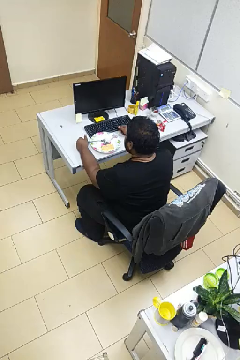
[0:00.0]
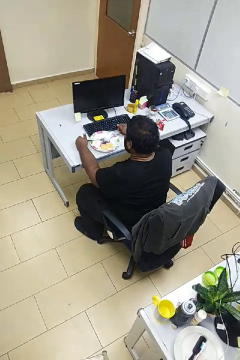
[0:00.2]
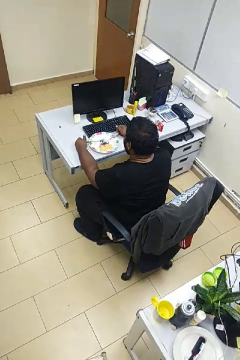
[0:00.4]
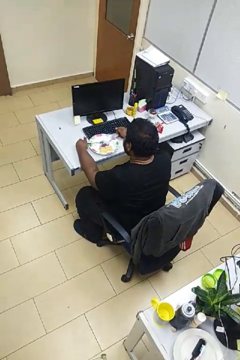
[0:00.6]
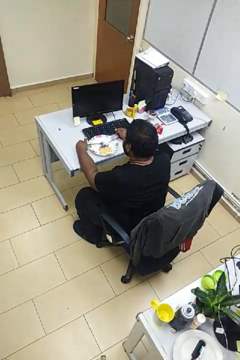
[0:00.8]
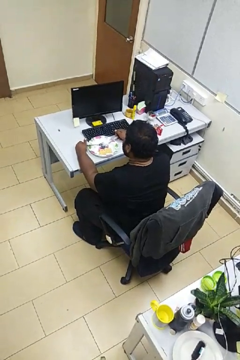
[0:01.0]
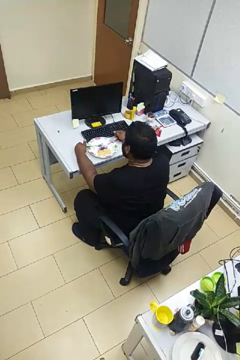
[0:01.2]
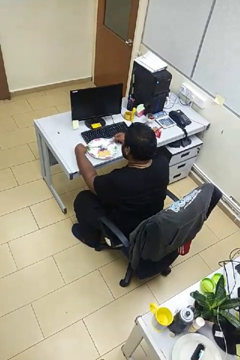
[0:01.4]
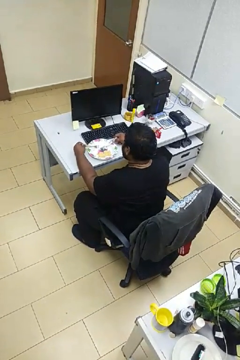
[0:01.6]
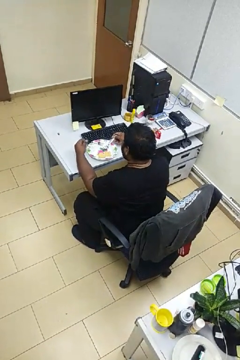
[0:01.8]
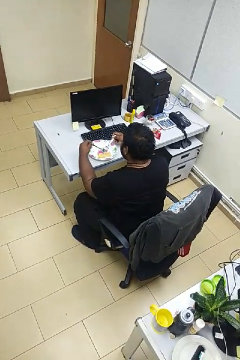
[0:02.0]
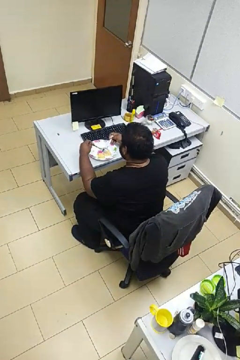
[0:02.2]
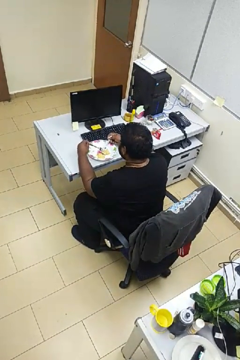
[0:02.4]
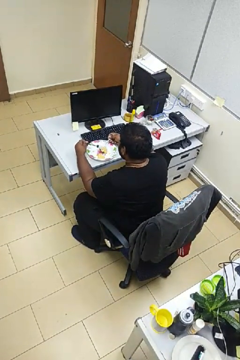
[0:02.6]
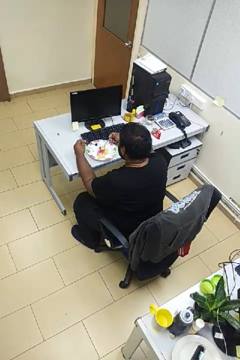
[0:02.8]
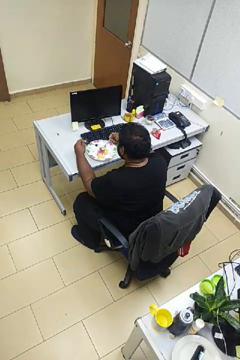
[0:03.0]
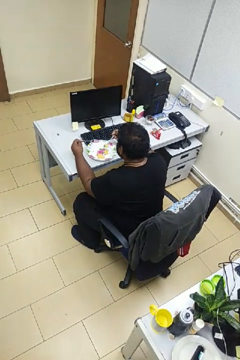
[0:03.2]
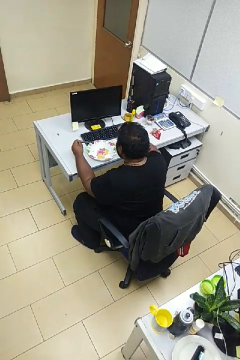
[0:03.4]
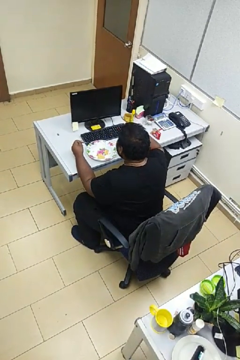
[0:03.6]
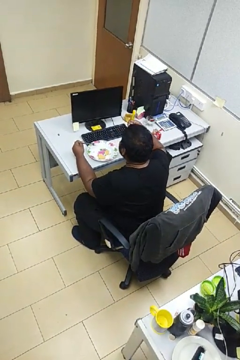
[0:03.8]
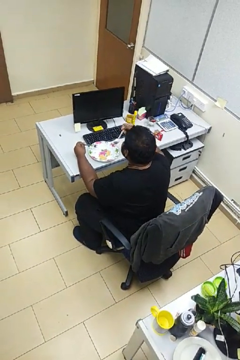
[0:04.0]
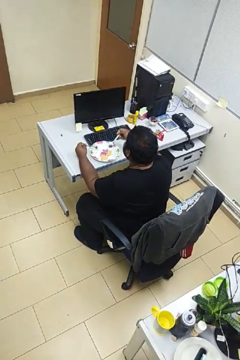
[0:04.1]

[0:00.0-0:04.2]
person eats with utensil

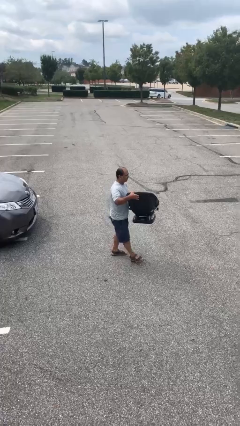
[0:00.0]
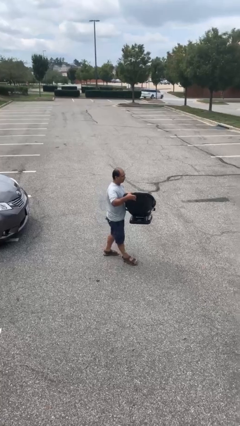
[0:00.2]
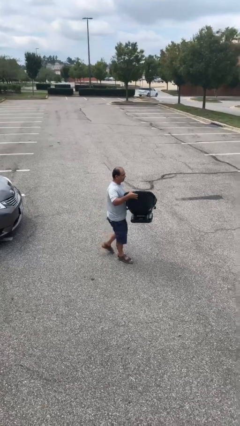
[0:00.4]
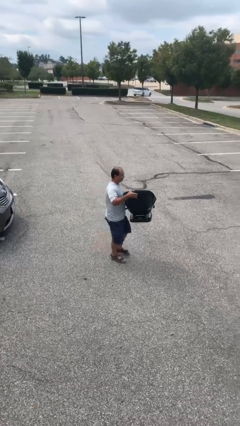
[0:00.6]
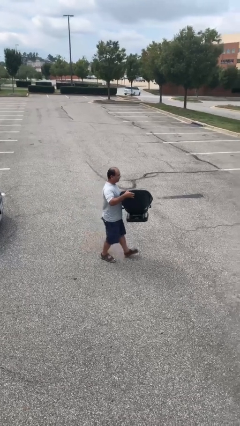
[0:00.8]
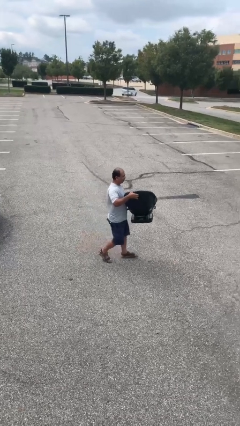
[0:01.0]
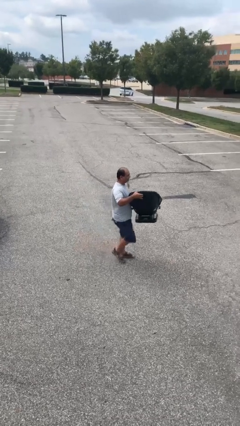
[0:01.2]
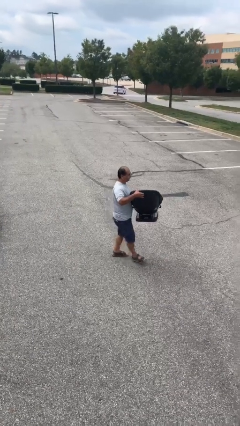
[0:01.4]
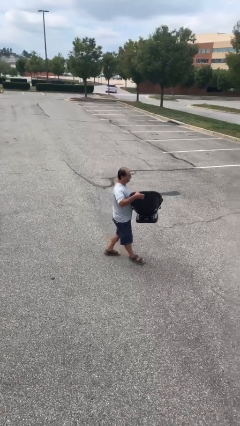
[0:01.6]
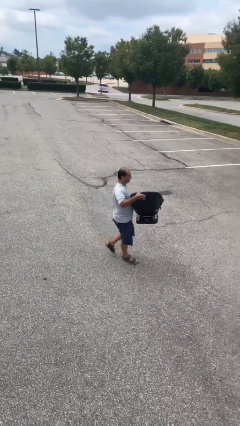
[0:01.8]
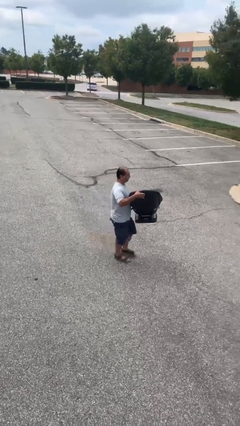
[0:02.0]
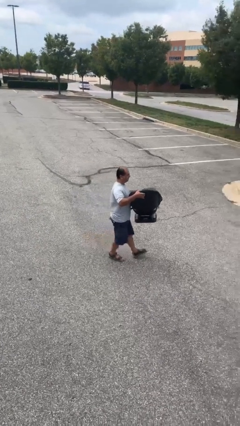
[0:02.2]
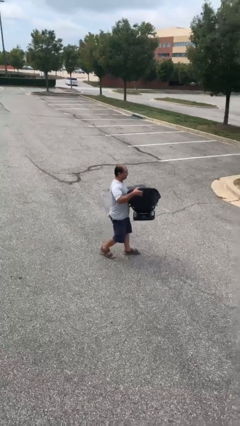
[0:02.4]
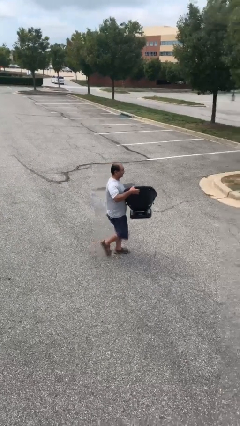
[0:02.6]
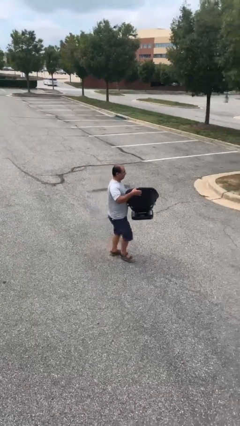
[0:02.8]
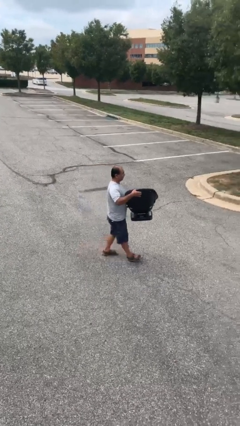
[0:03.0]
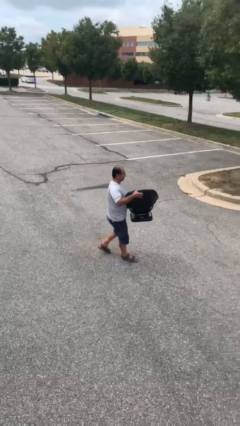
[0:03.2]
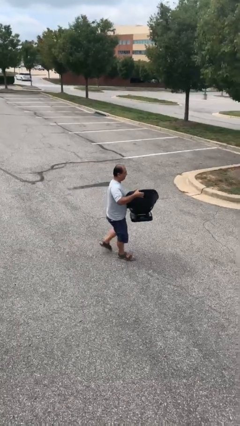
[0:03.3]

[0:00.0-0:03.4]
person carries heavy object

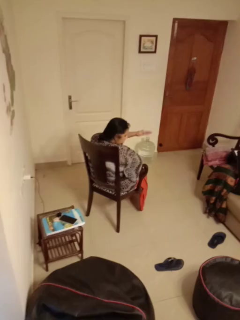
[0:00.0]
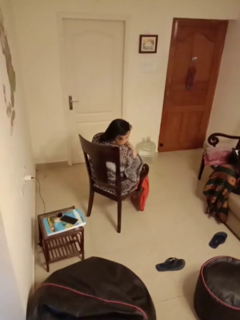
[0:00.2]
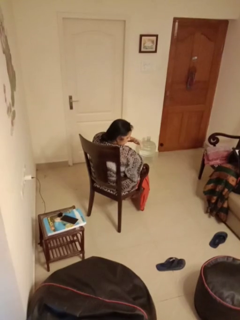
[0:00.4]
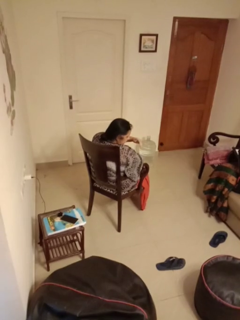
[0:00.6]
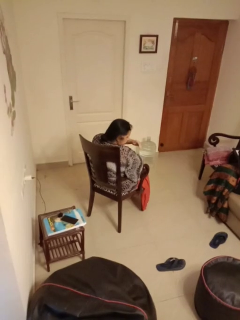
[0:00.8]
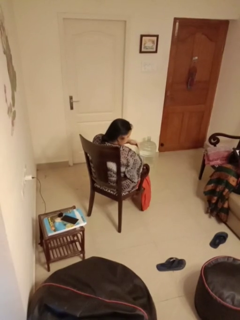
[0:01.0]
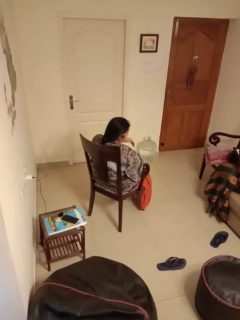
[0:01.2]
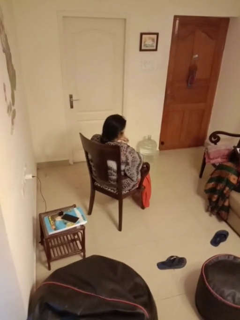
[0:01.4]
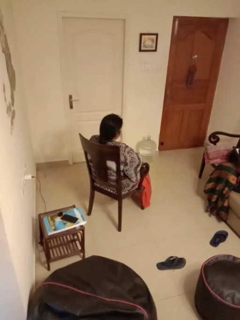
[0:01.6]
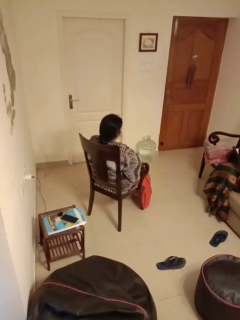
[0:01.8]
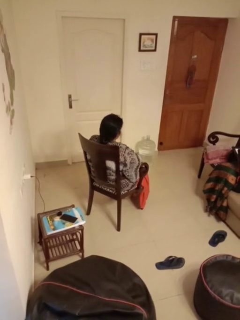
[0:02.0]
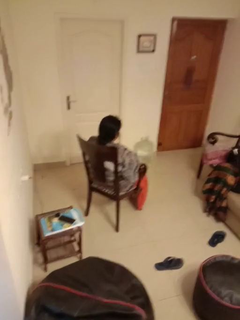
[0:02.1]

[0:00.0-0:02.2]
person swats bug

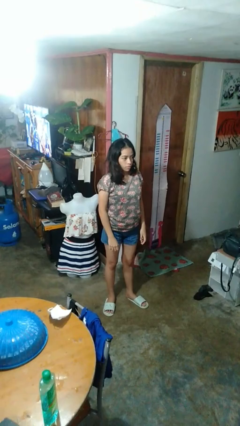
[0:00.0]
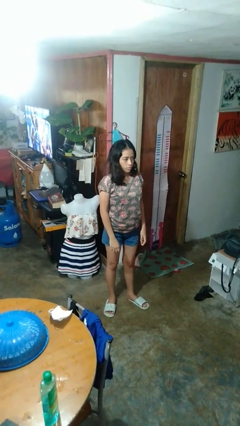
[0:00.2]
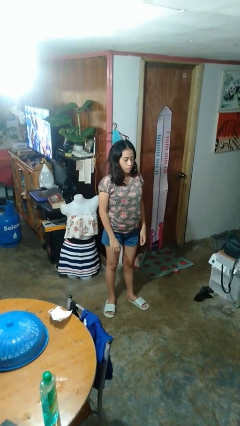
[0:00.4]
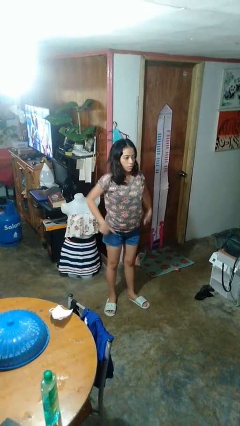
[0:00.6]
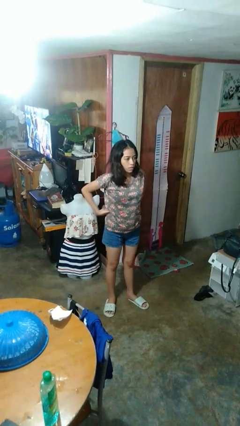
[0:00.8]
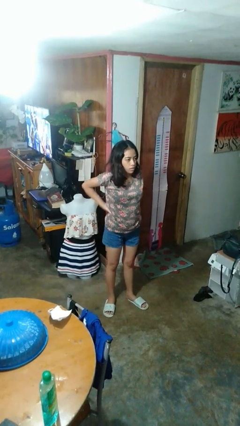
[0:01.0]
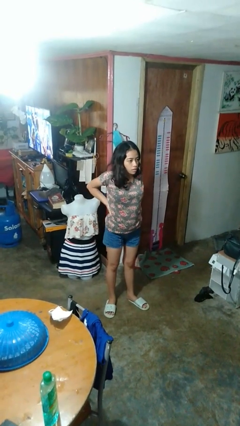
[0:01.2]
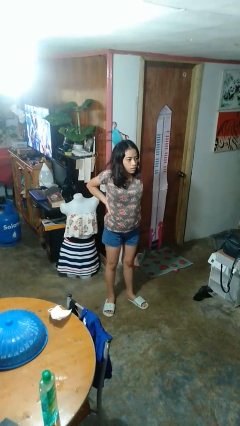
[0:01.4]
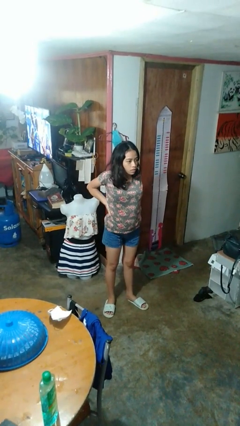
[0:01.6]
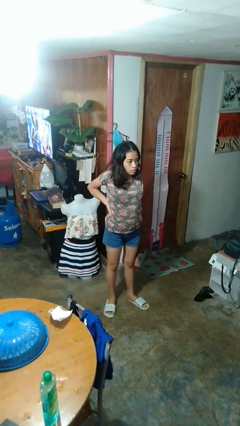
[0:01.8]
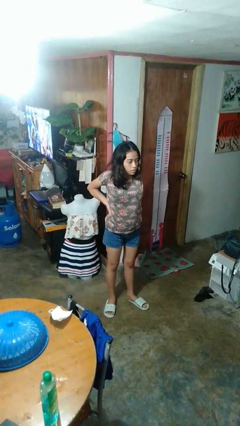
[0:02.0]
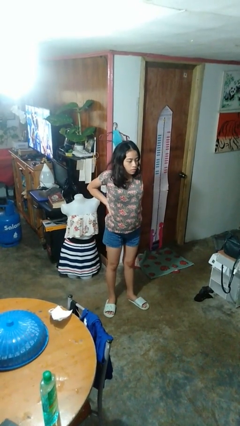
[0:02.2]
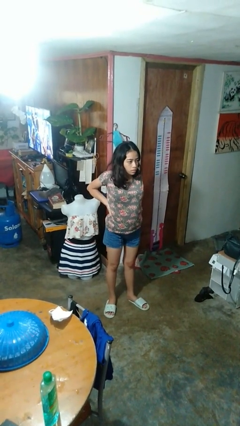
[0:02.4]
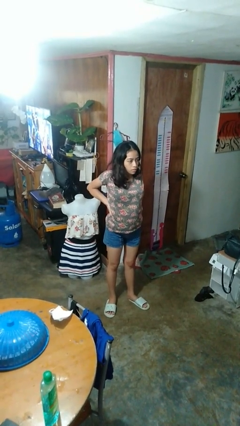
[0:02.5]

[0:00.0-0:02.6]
person stretches back

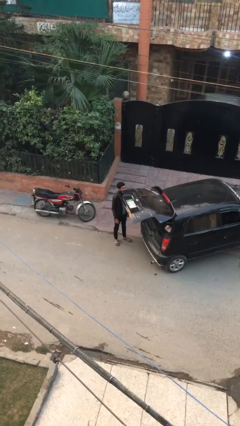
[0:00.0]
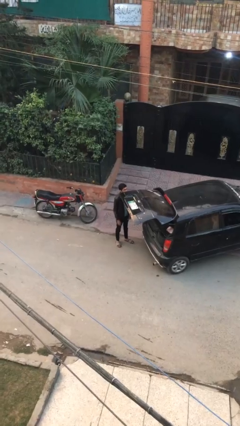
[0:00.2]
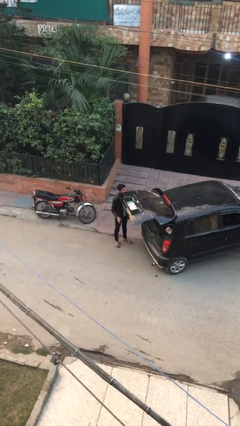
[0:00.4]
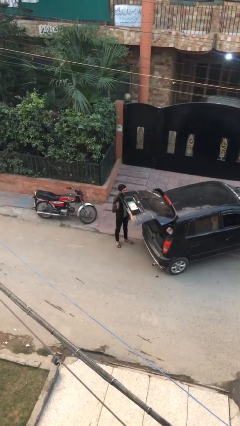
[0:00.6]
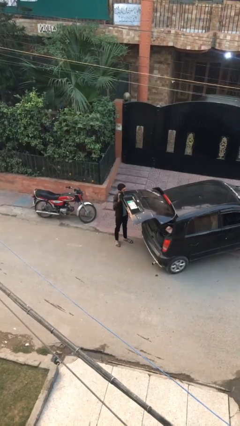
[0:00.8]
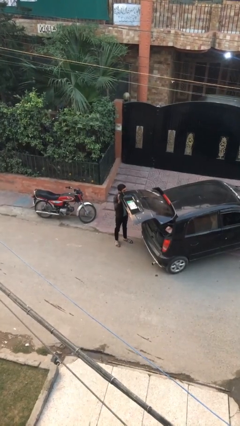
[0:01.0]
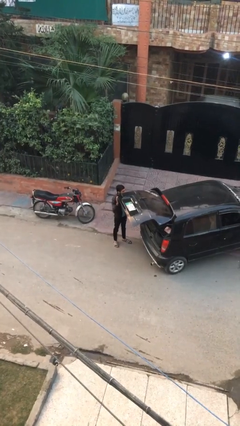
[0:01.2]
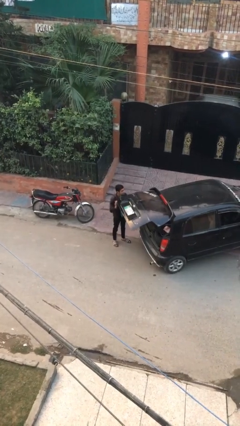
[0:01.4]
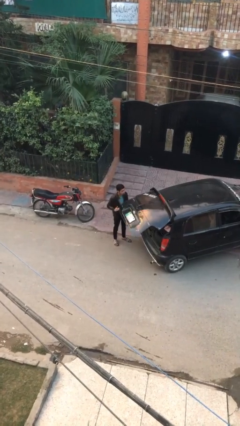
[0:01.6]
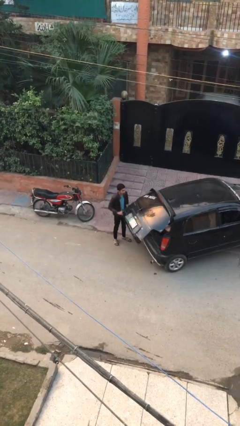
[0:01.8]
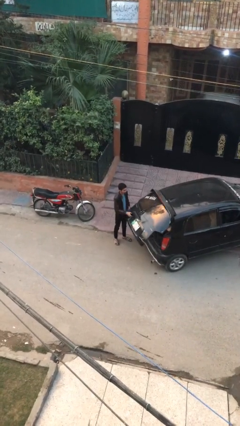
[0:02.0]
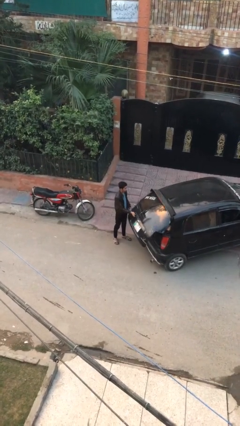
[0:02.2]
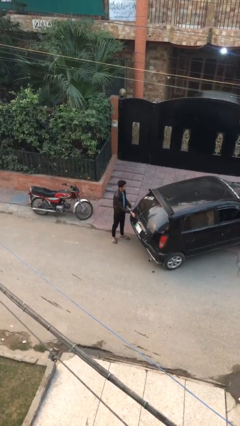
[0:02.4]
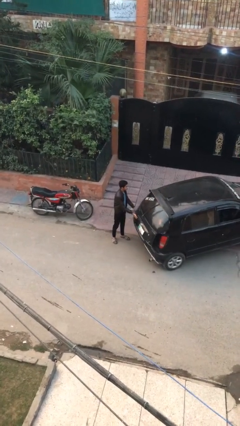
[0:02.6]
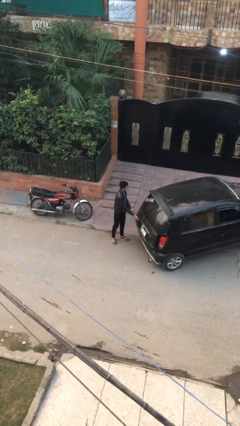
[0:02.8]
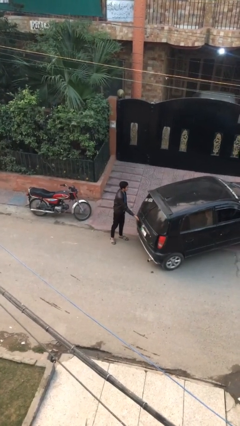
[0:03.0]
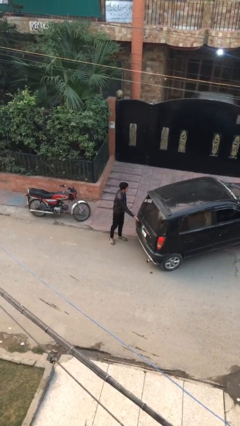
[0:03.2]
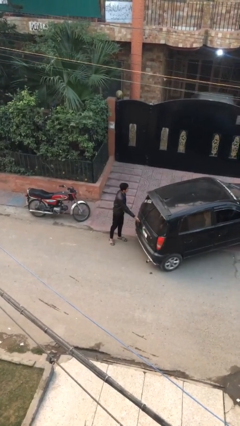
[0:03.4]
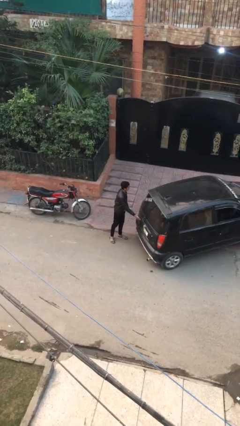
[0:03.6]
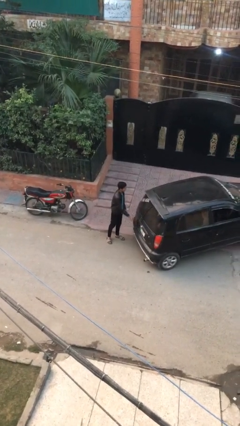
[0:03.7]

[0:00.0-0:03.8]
person closes car trunk

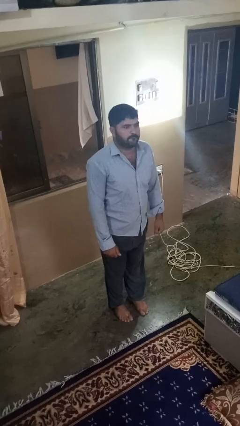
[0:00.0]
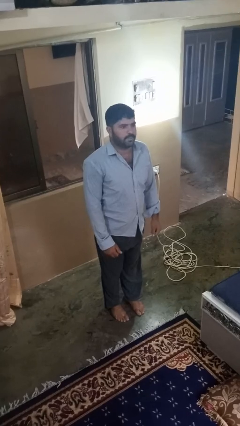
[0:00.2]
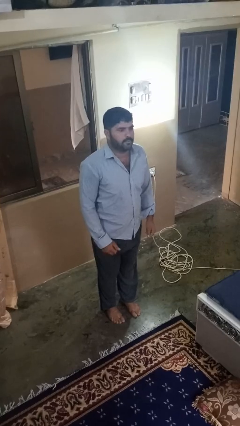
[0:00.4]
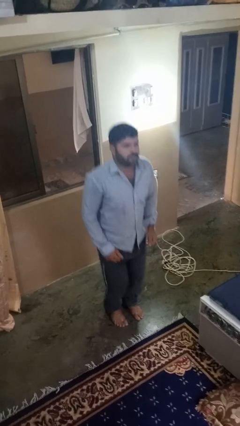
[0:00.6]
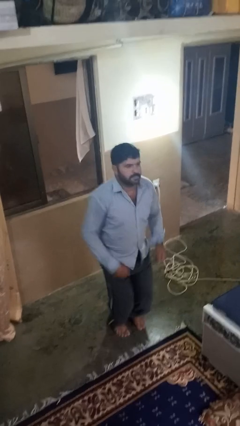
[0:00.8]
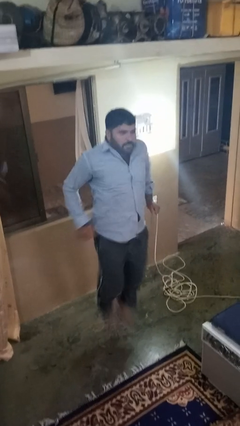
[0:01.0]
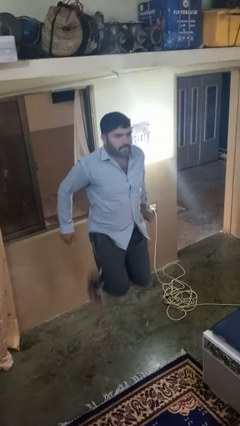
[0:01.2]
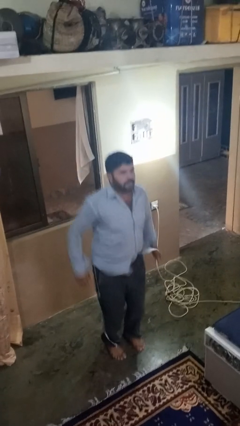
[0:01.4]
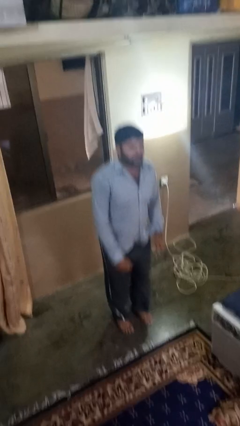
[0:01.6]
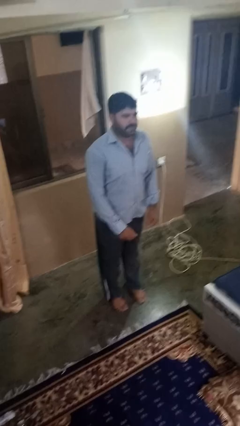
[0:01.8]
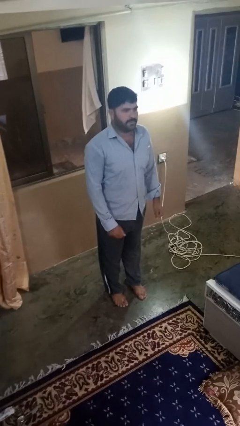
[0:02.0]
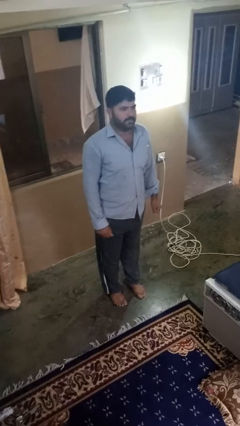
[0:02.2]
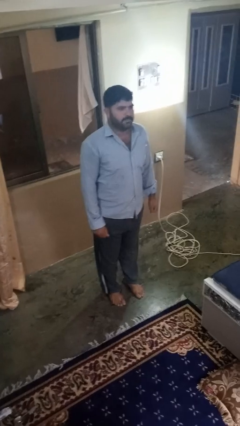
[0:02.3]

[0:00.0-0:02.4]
person jumps
